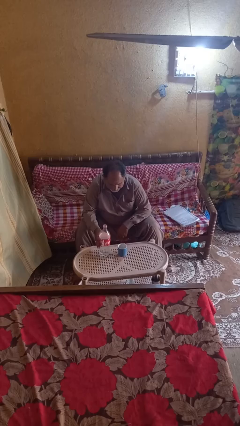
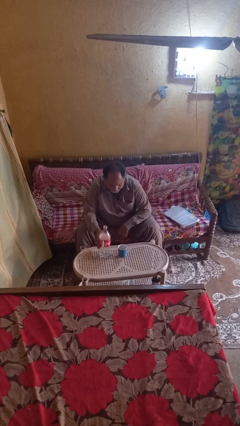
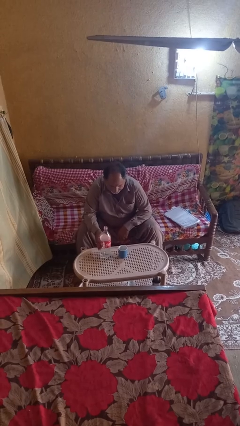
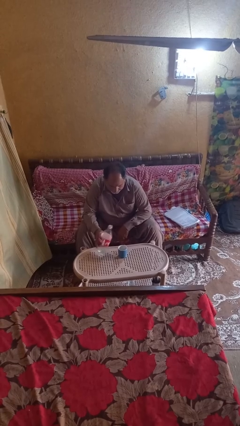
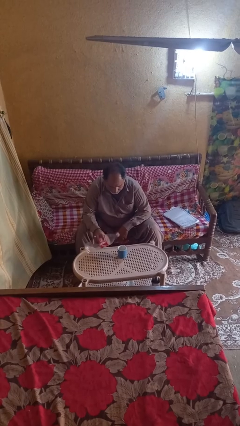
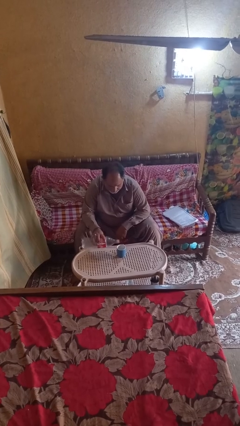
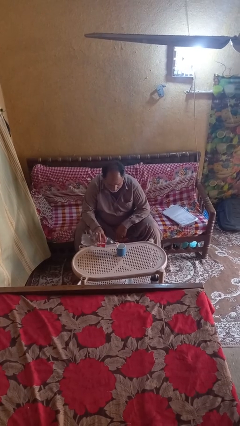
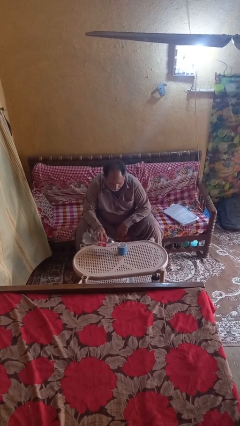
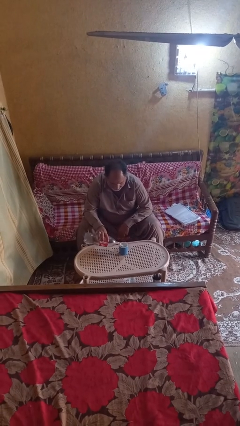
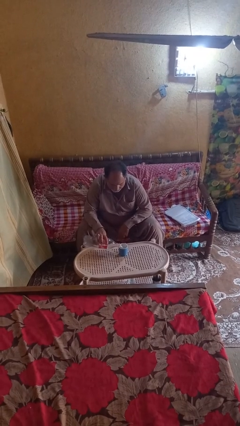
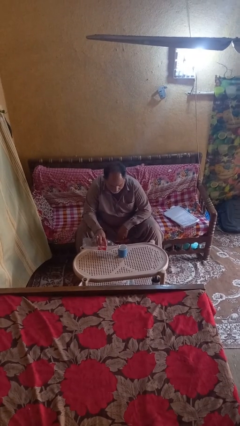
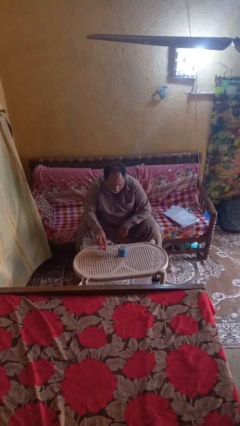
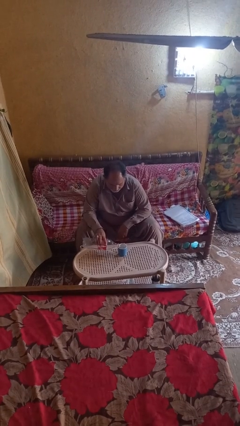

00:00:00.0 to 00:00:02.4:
person pours liquid into cup

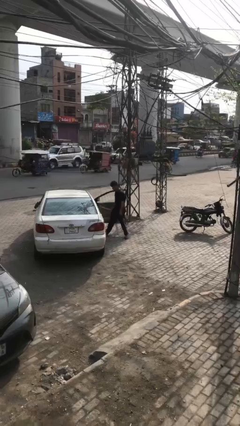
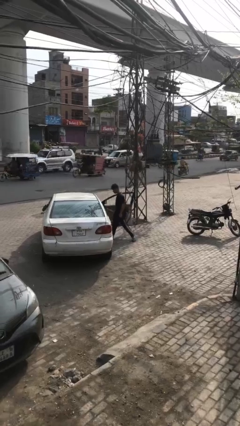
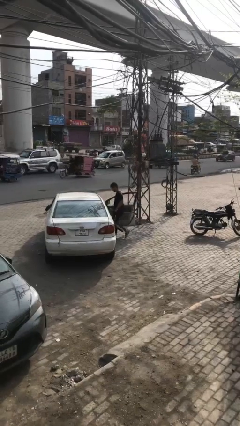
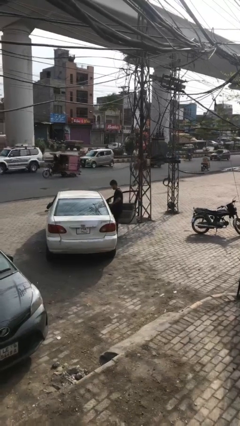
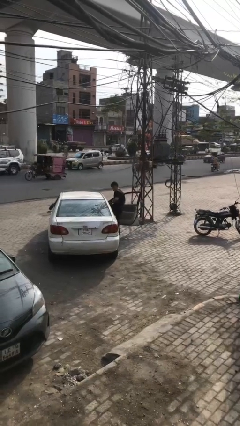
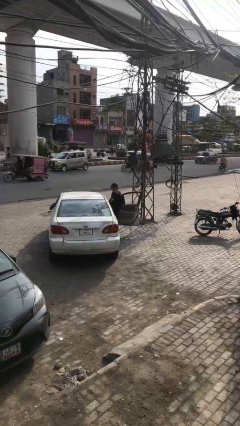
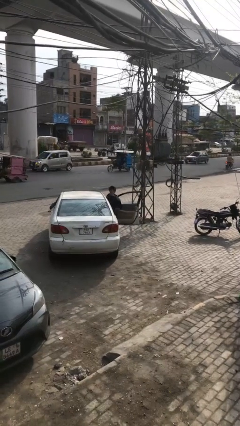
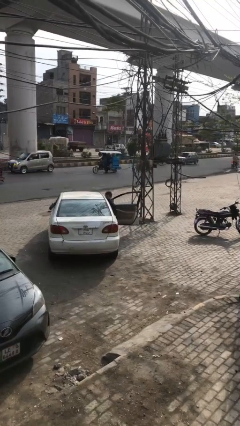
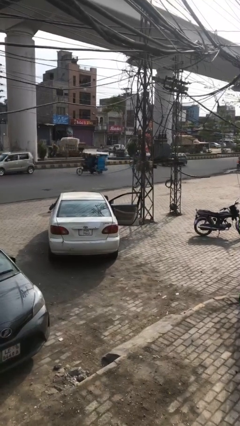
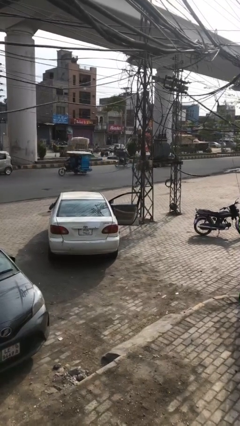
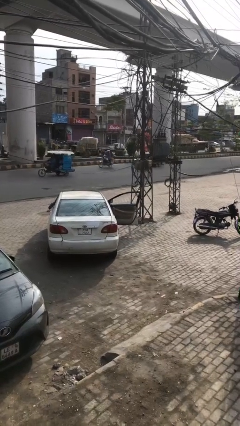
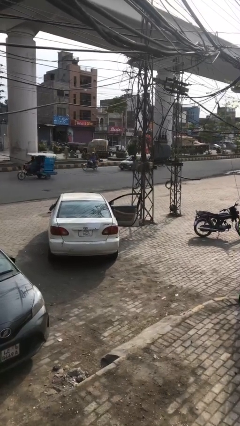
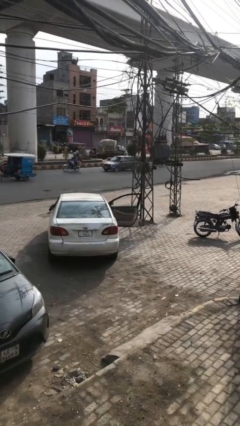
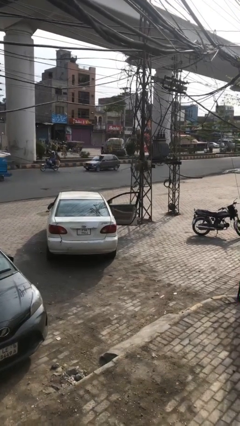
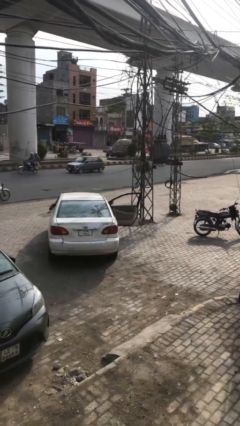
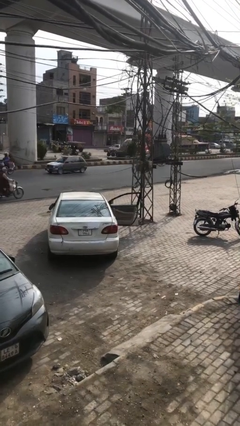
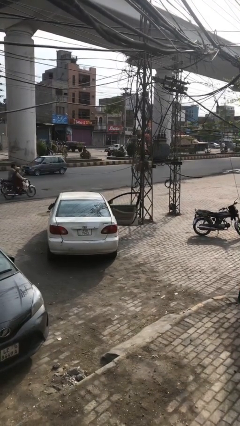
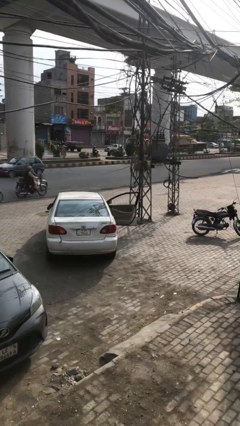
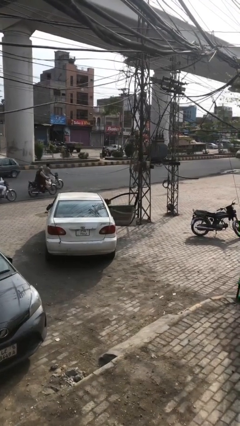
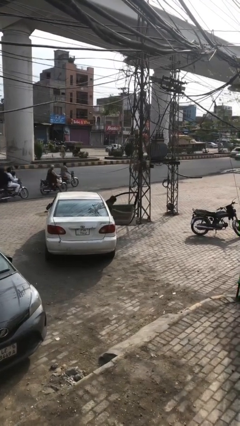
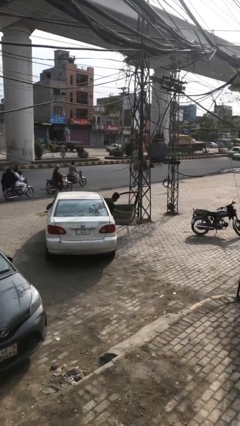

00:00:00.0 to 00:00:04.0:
person enters car

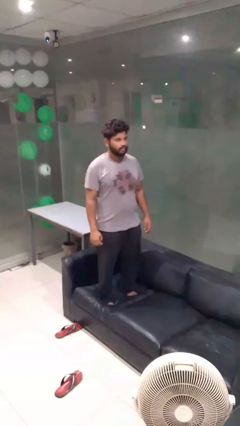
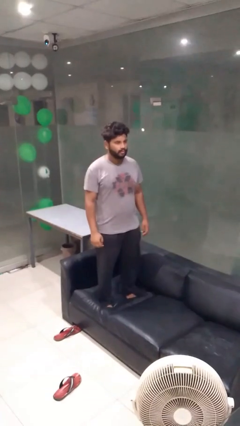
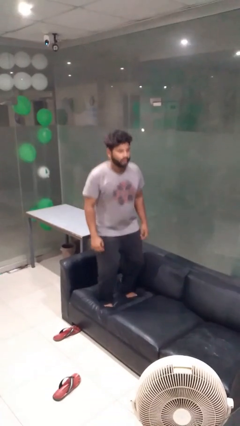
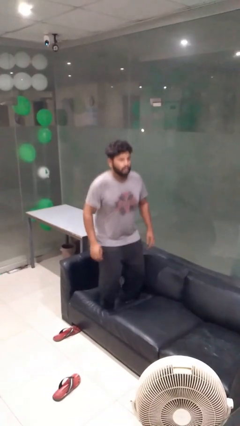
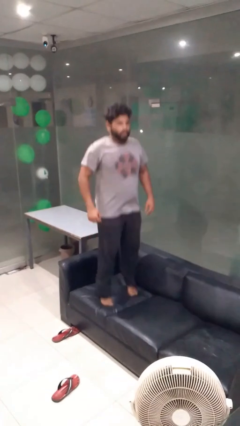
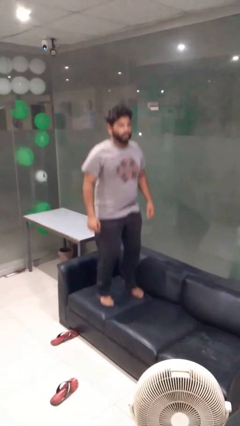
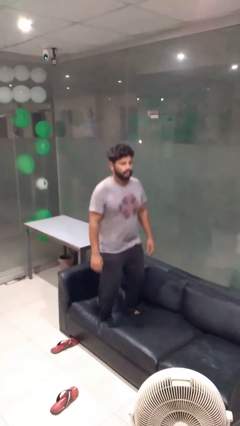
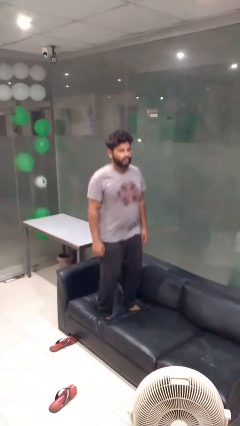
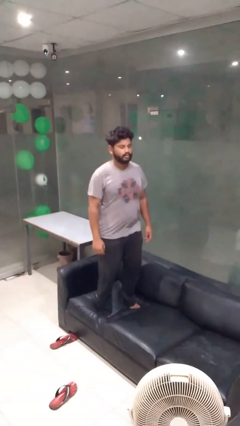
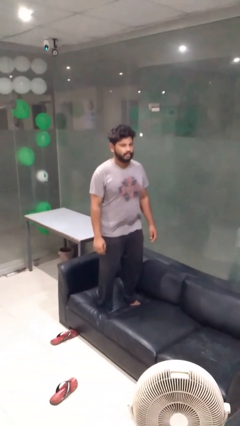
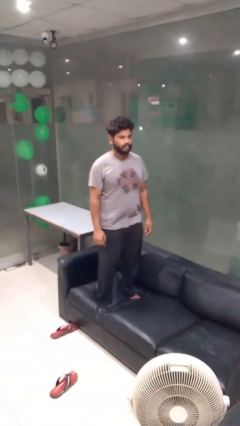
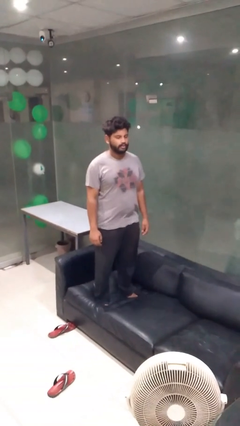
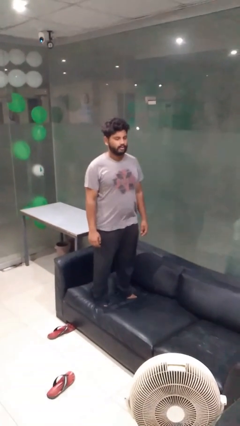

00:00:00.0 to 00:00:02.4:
person jumps on couch

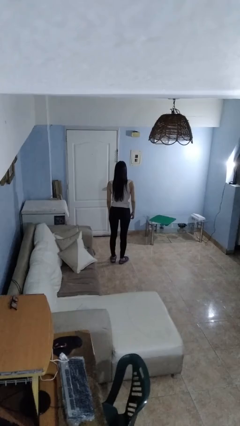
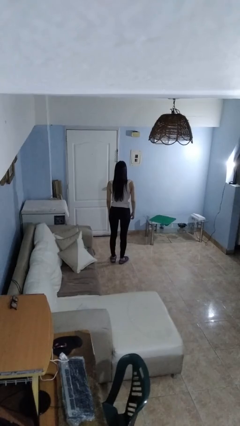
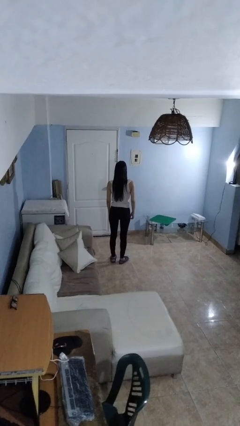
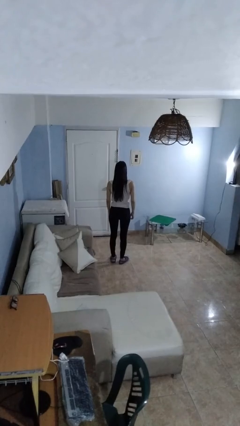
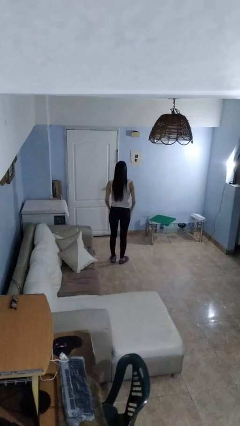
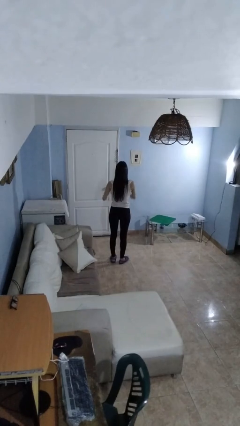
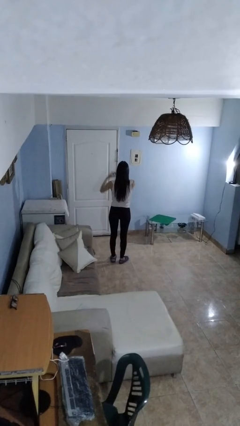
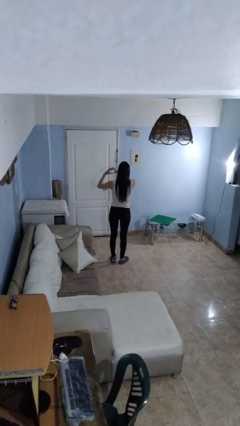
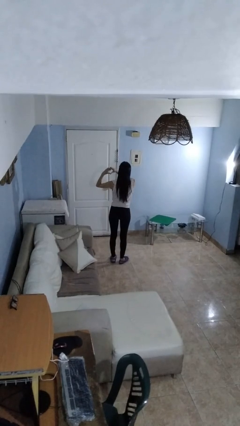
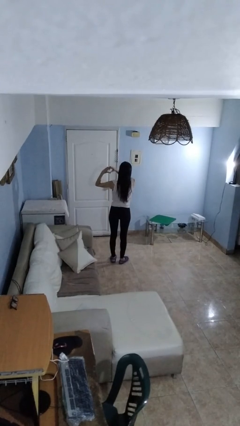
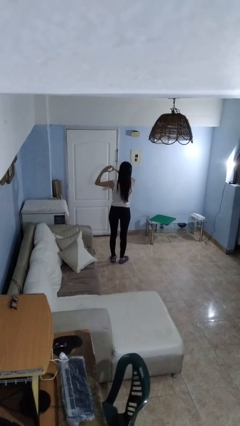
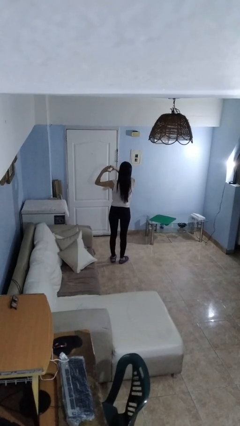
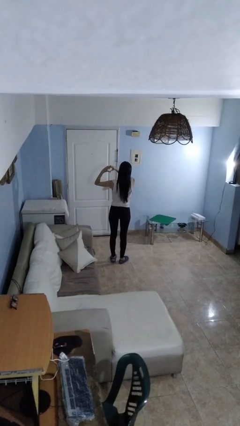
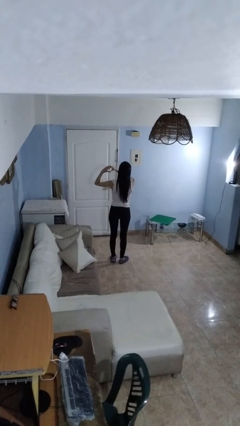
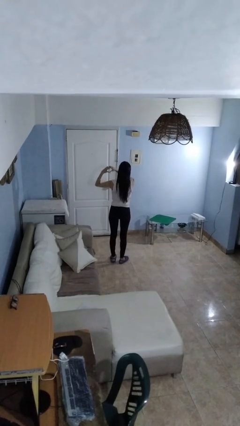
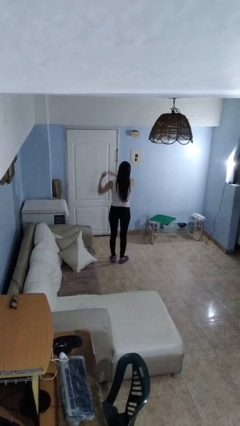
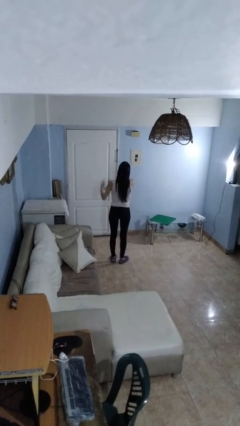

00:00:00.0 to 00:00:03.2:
person gestures heart

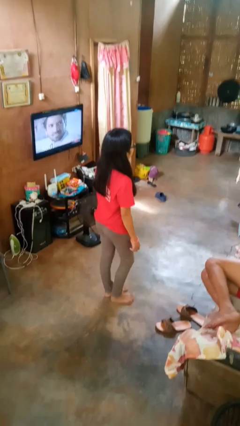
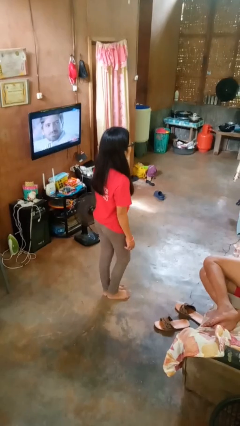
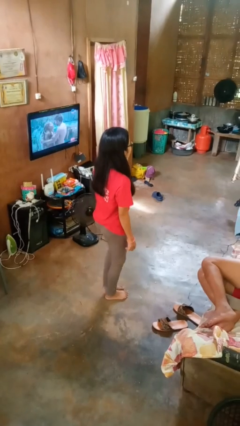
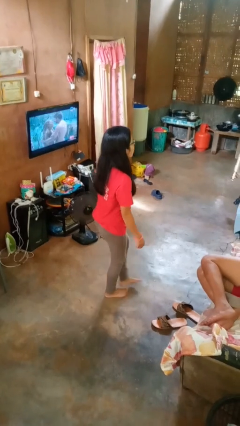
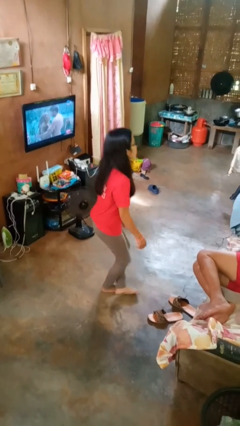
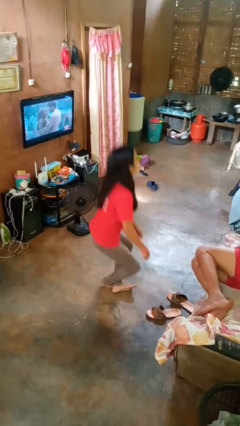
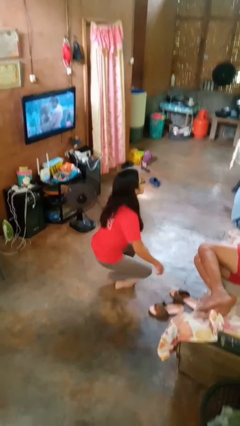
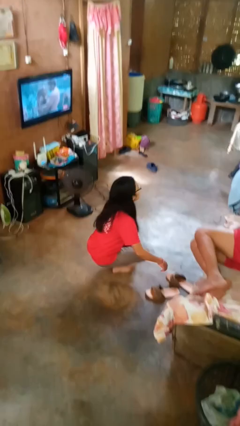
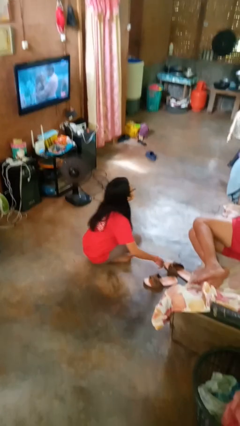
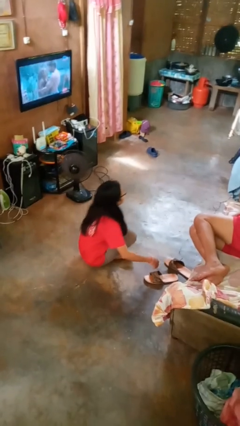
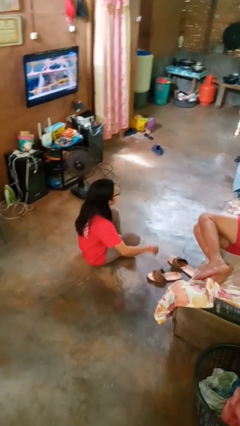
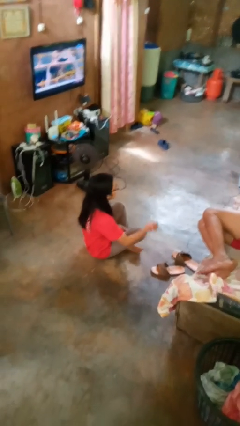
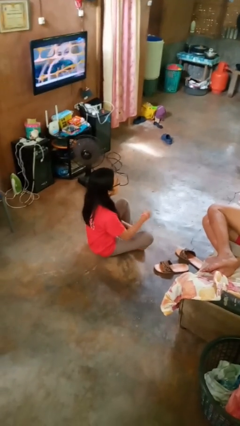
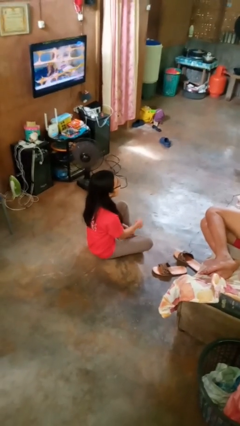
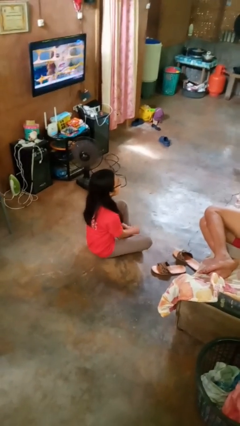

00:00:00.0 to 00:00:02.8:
person sits crisscross

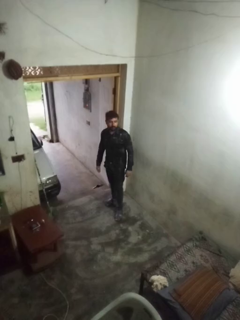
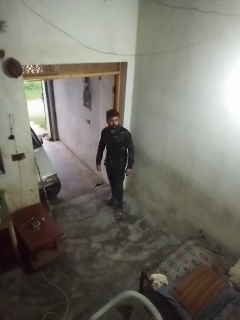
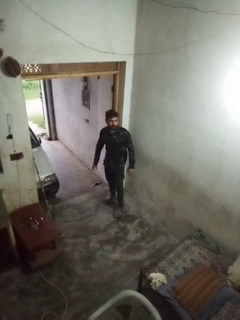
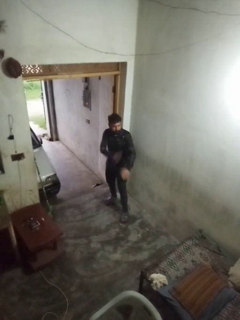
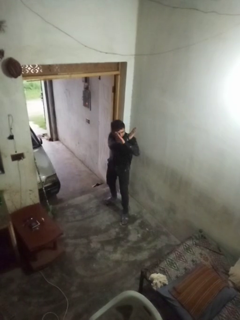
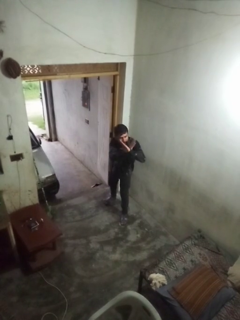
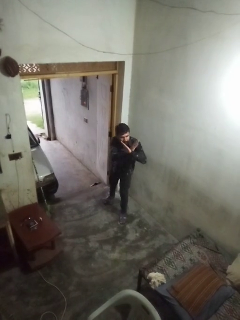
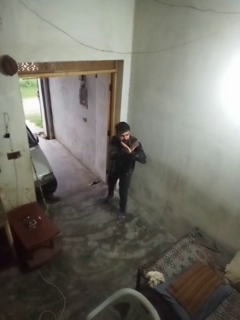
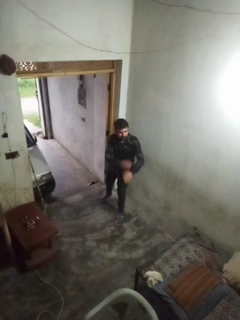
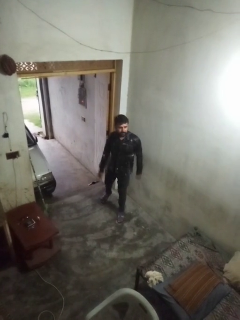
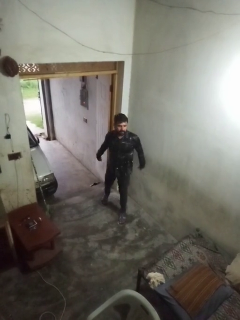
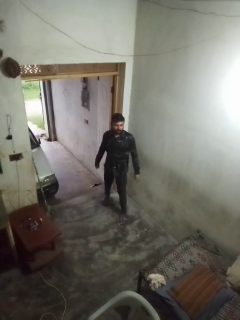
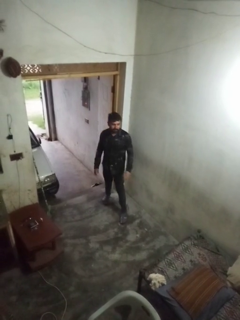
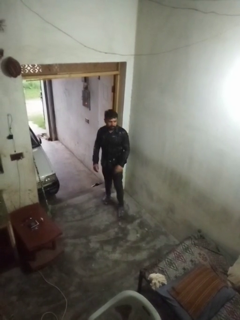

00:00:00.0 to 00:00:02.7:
person karate chop

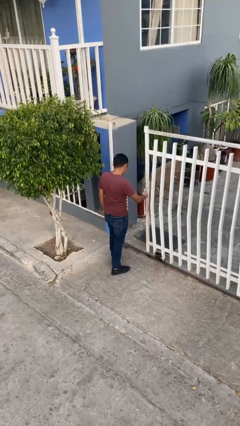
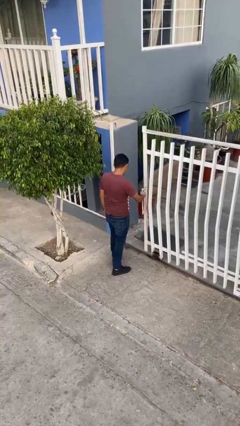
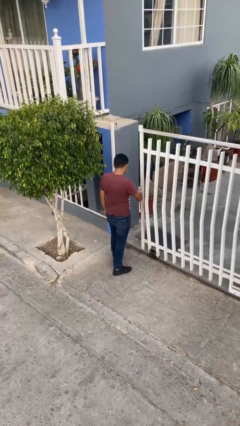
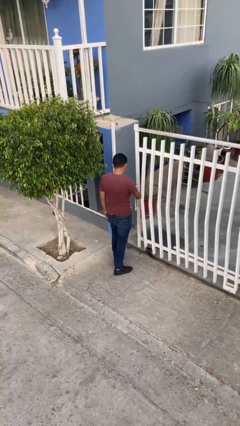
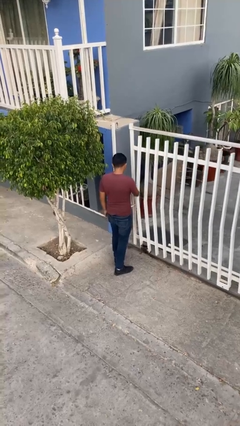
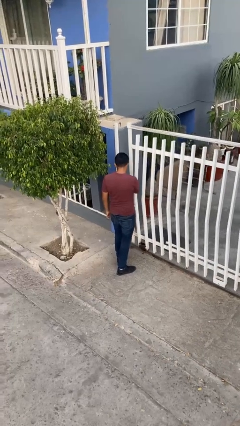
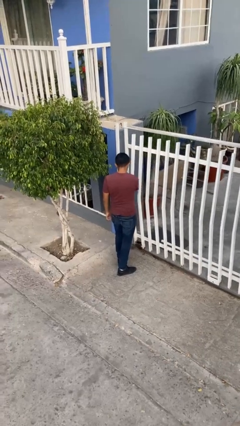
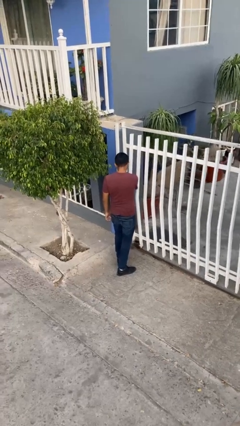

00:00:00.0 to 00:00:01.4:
person closes facility door
